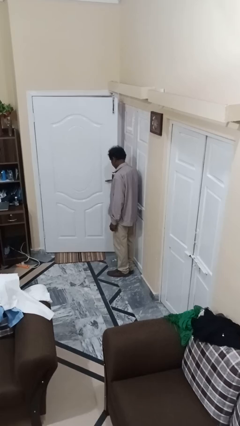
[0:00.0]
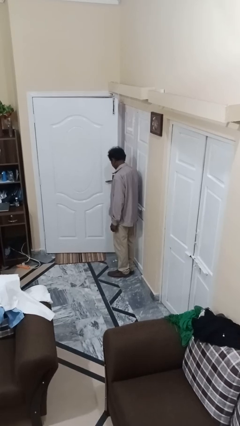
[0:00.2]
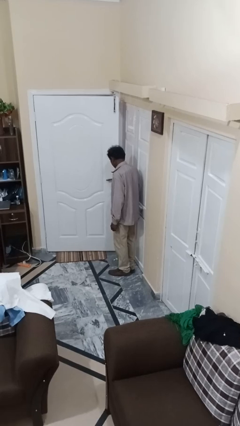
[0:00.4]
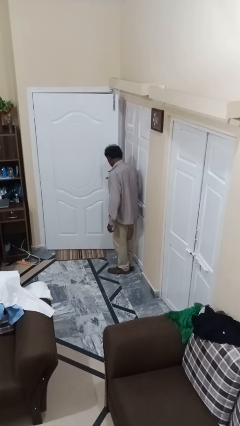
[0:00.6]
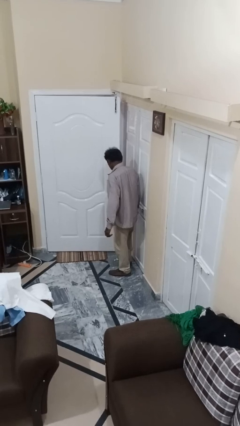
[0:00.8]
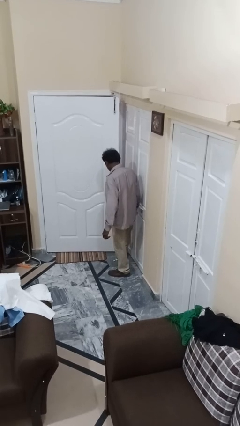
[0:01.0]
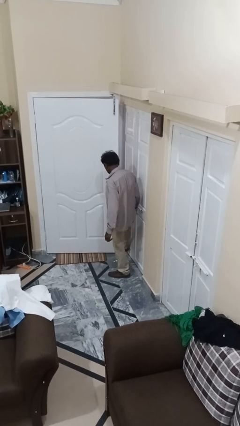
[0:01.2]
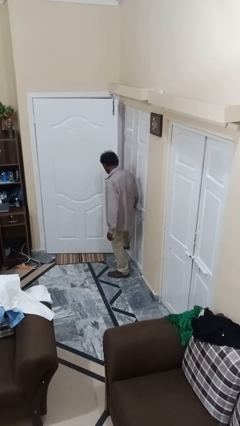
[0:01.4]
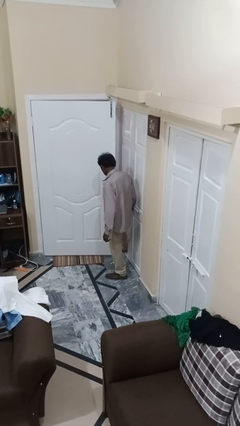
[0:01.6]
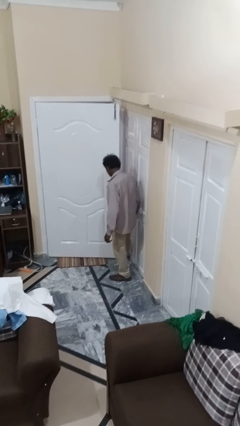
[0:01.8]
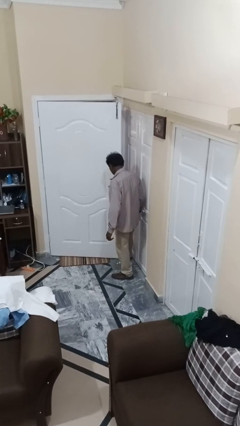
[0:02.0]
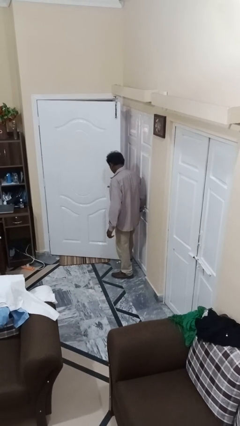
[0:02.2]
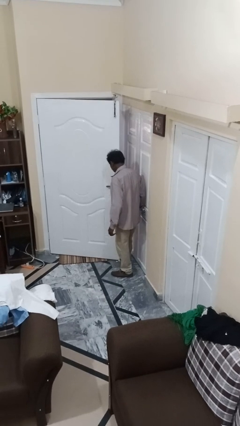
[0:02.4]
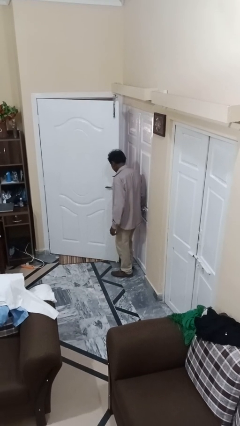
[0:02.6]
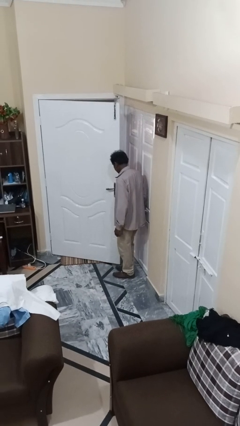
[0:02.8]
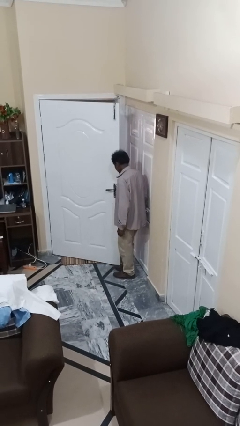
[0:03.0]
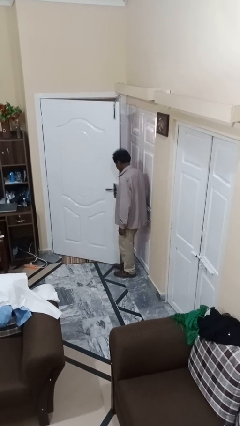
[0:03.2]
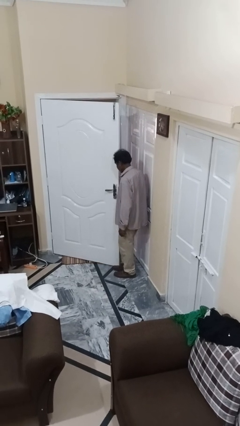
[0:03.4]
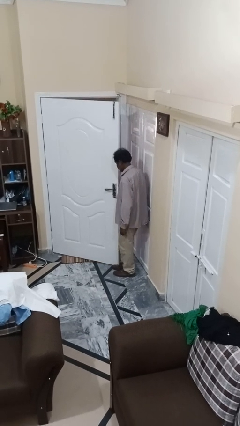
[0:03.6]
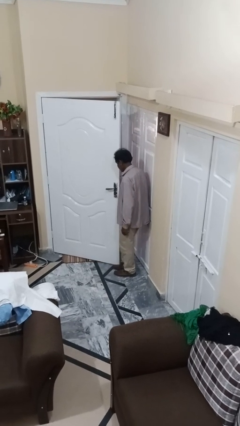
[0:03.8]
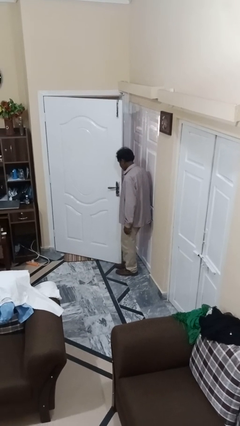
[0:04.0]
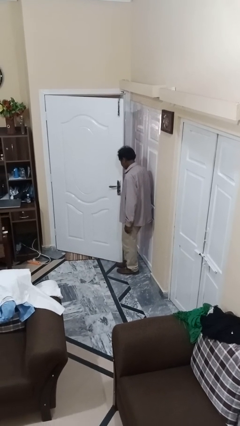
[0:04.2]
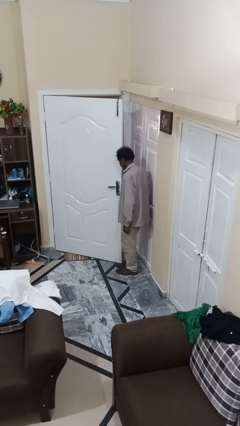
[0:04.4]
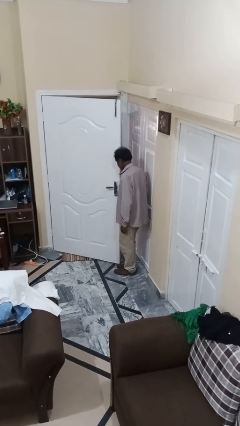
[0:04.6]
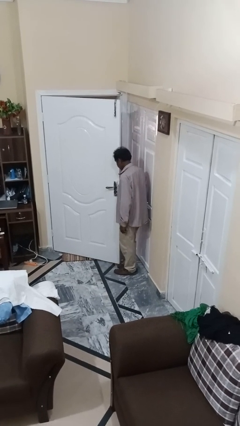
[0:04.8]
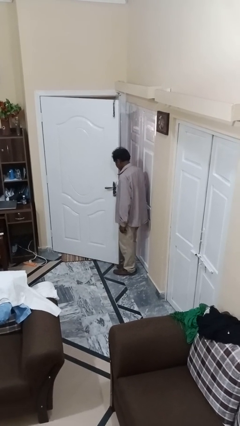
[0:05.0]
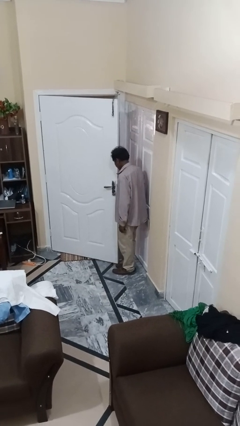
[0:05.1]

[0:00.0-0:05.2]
person opens facility door

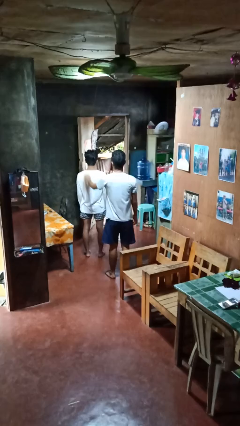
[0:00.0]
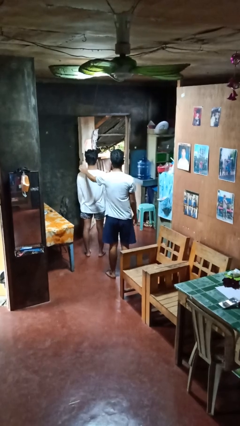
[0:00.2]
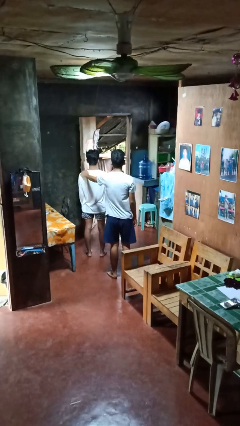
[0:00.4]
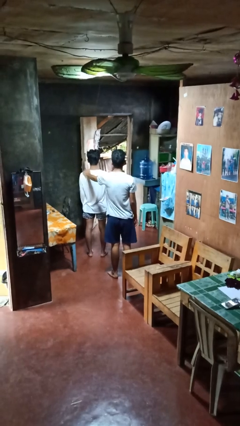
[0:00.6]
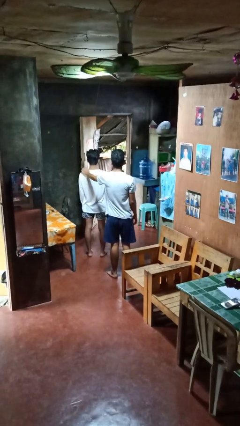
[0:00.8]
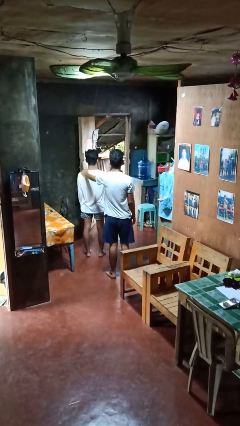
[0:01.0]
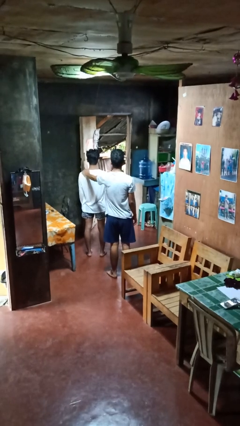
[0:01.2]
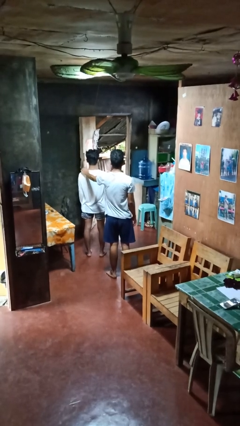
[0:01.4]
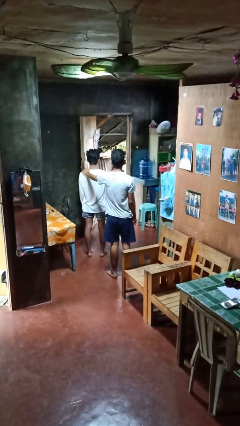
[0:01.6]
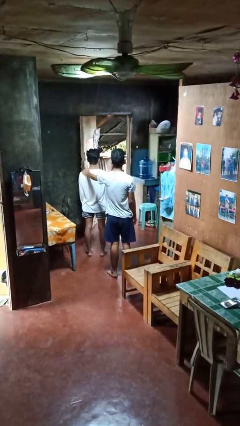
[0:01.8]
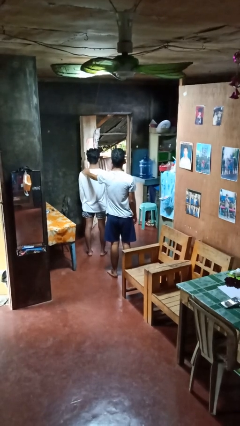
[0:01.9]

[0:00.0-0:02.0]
person pounds shoulders of person

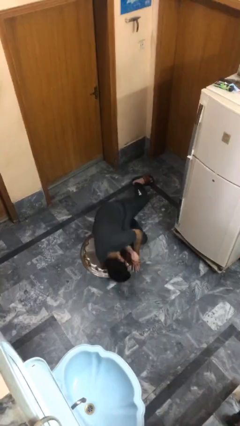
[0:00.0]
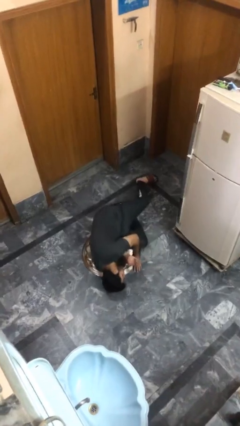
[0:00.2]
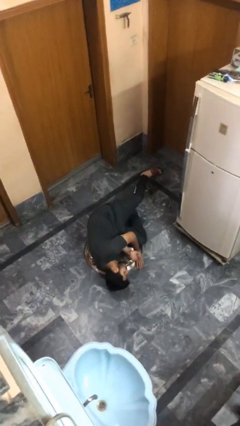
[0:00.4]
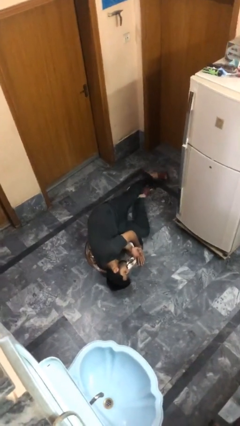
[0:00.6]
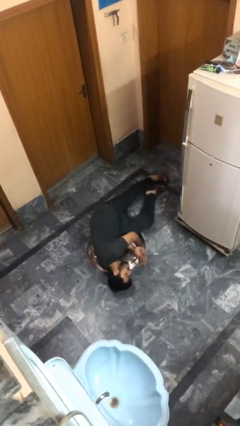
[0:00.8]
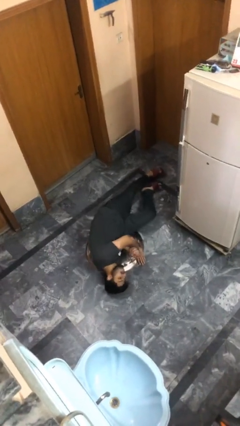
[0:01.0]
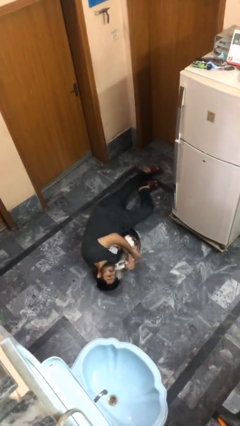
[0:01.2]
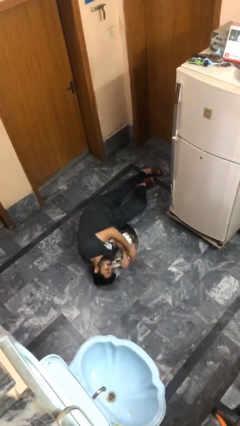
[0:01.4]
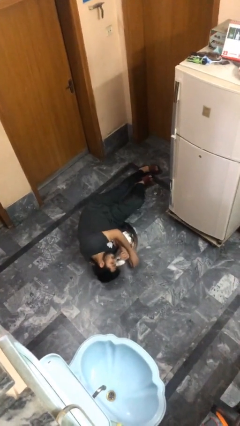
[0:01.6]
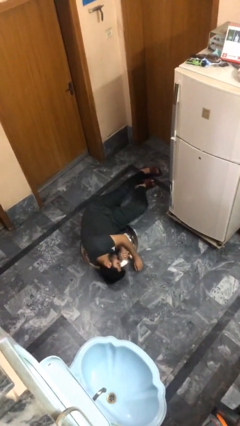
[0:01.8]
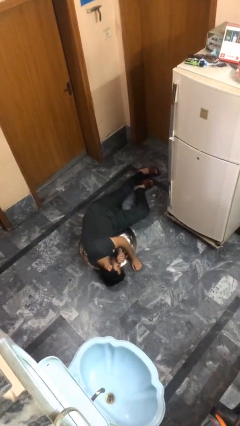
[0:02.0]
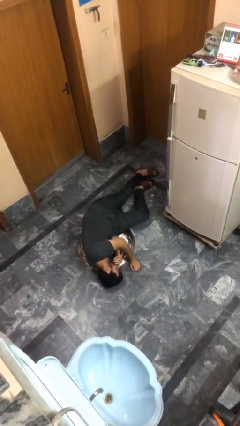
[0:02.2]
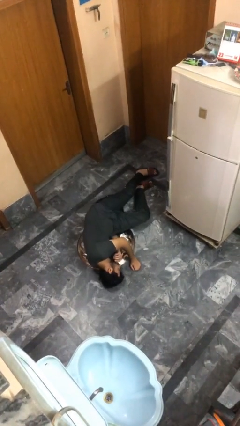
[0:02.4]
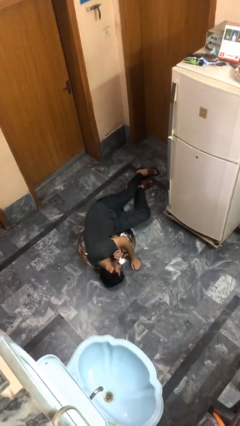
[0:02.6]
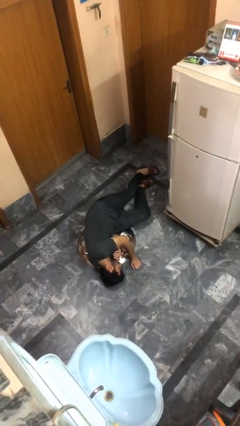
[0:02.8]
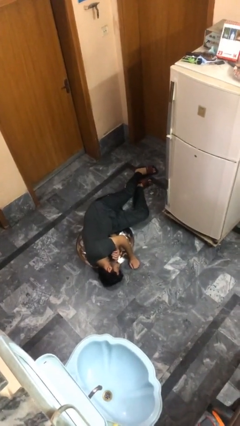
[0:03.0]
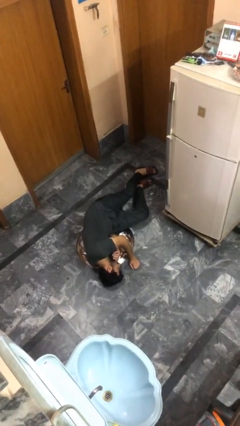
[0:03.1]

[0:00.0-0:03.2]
person lies down on floor

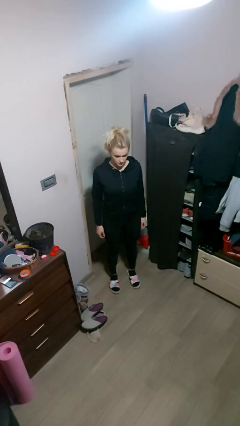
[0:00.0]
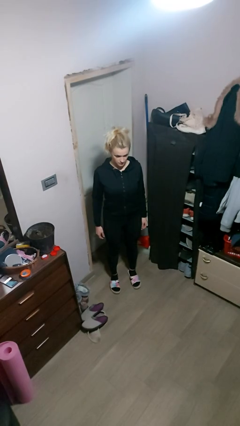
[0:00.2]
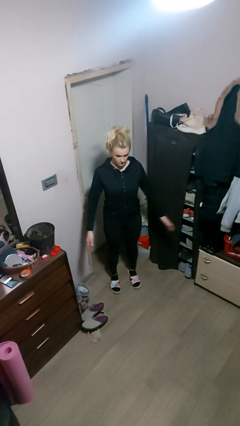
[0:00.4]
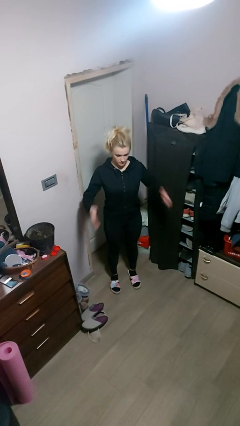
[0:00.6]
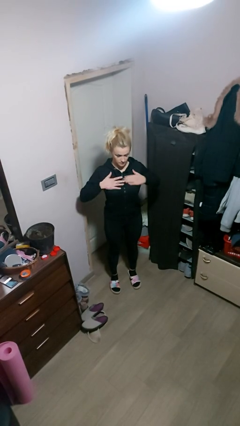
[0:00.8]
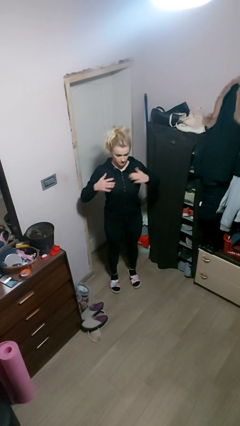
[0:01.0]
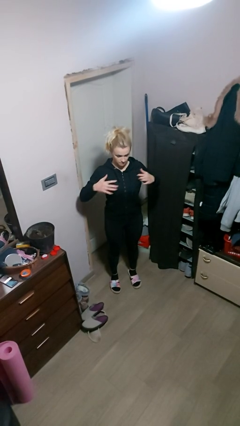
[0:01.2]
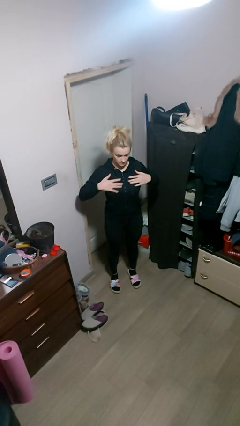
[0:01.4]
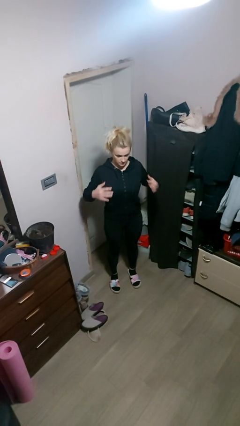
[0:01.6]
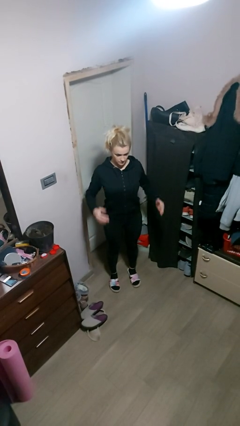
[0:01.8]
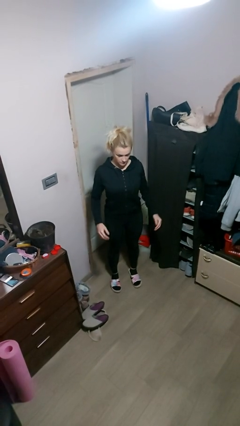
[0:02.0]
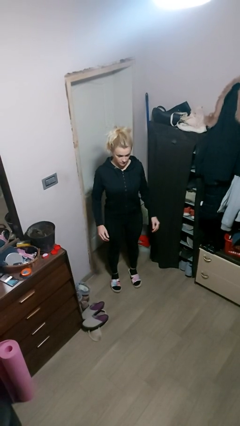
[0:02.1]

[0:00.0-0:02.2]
person drums on chest

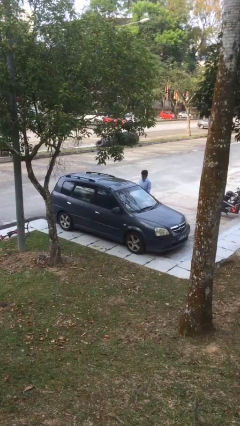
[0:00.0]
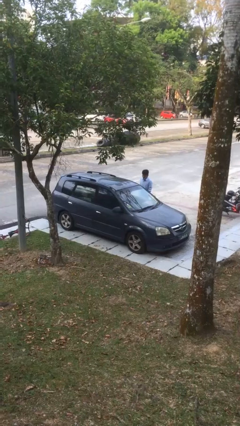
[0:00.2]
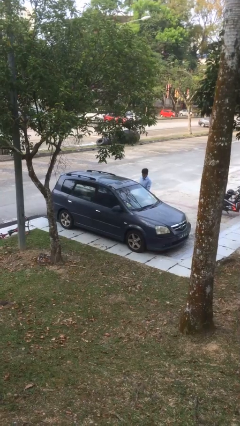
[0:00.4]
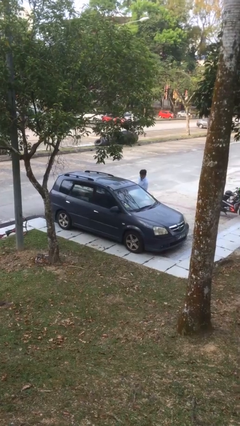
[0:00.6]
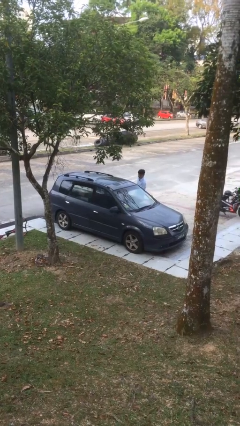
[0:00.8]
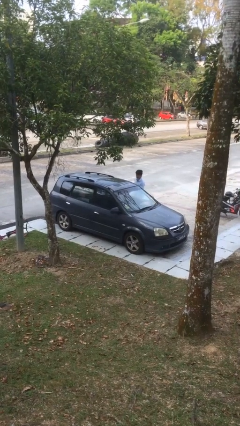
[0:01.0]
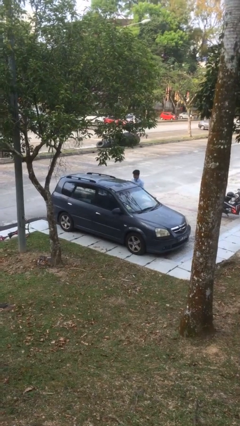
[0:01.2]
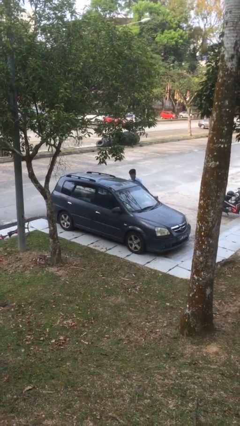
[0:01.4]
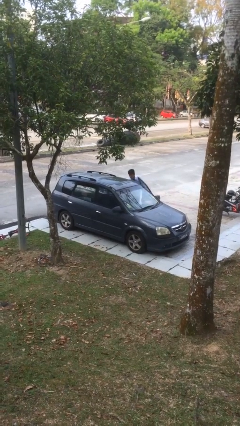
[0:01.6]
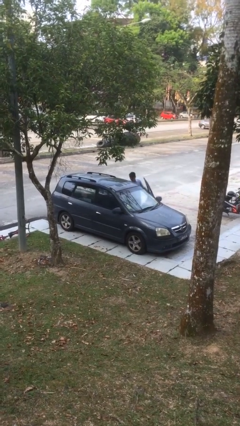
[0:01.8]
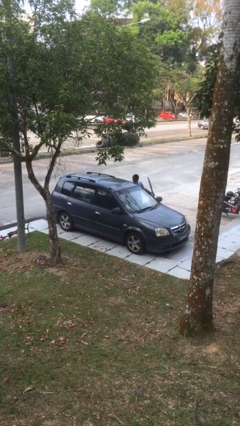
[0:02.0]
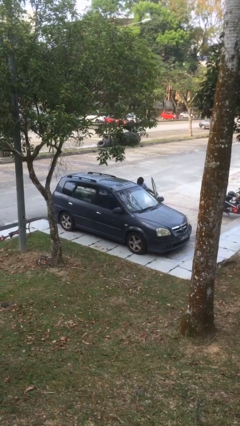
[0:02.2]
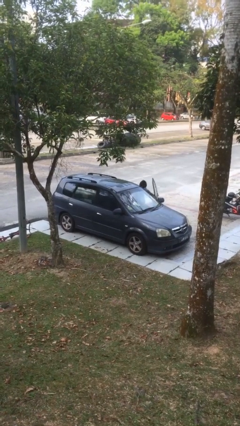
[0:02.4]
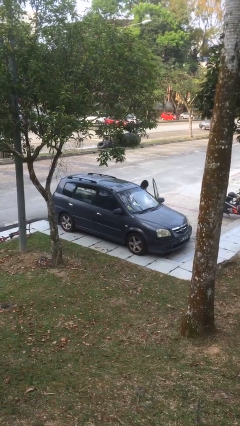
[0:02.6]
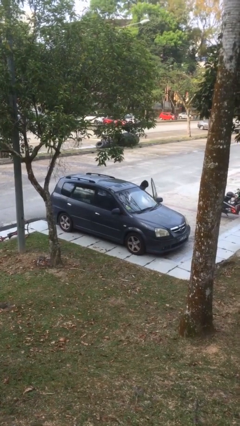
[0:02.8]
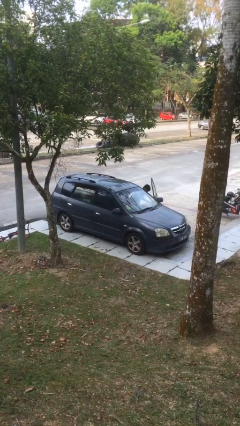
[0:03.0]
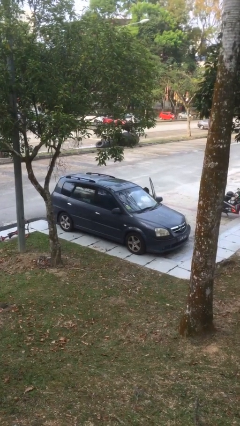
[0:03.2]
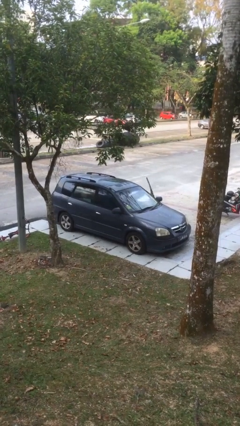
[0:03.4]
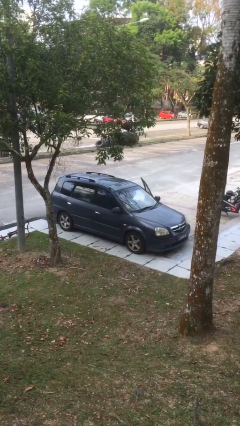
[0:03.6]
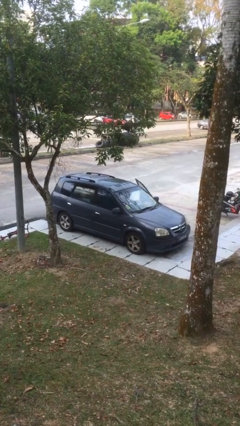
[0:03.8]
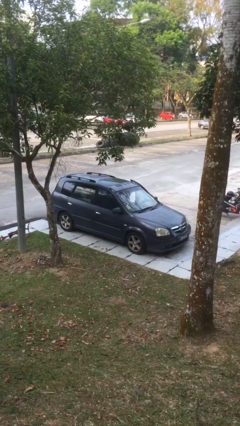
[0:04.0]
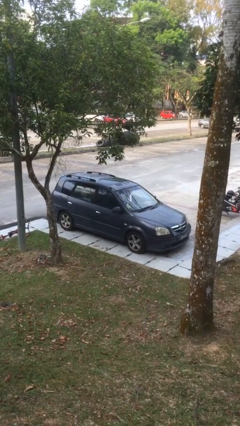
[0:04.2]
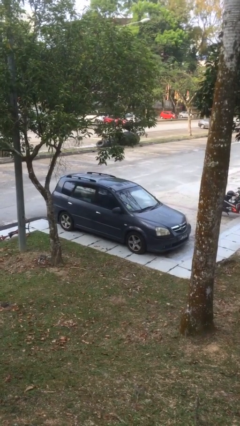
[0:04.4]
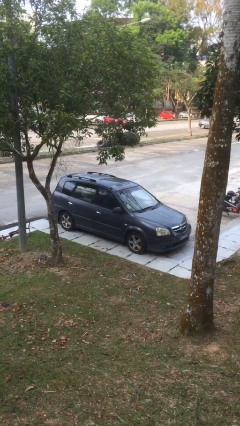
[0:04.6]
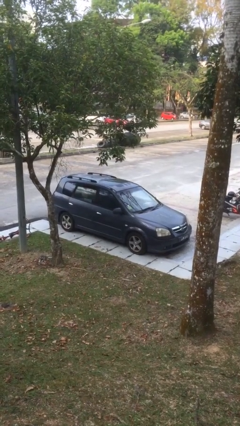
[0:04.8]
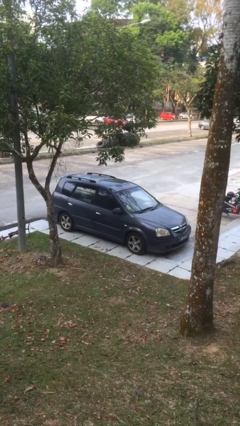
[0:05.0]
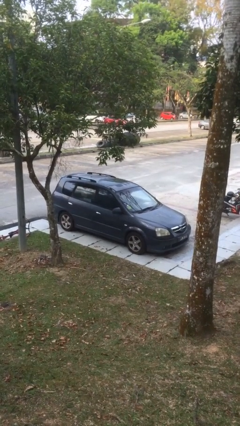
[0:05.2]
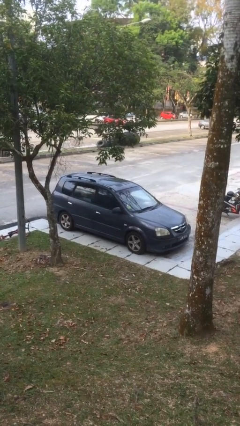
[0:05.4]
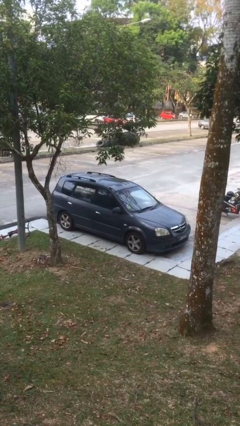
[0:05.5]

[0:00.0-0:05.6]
car picks up person
